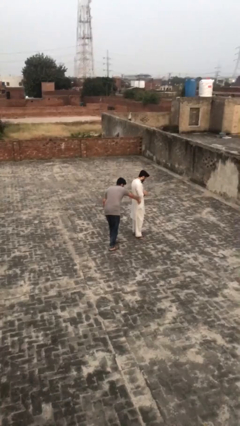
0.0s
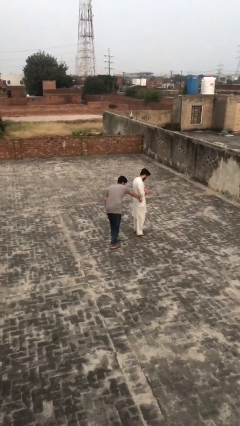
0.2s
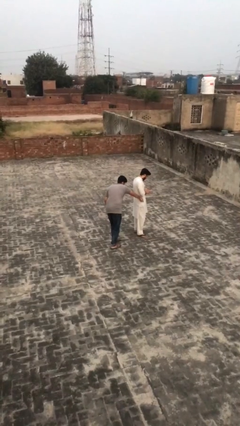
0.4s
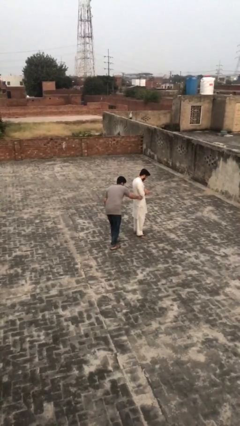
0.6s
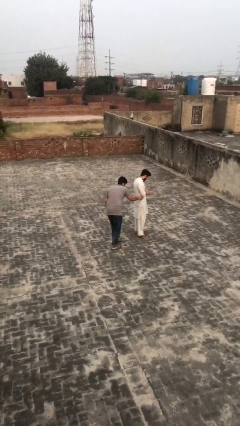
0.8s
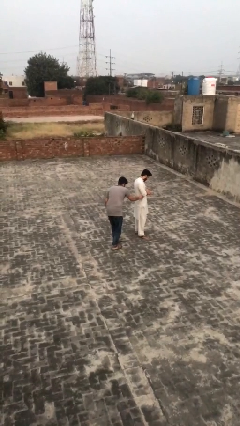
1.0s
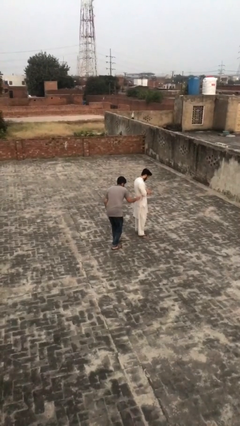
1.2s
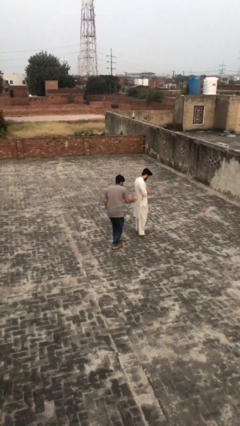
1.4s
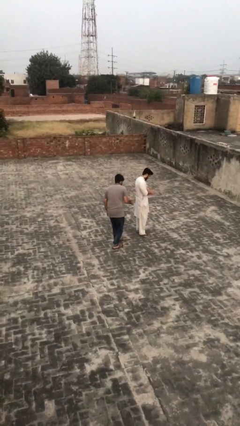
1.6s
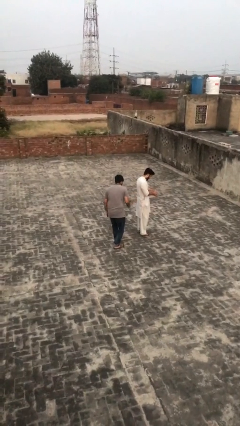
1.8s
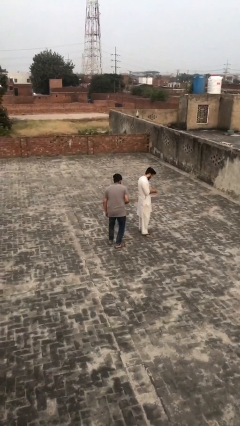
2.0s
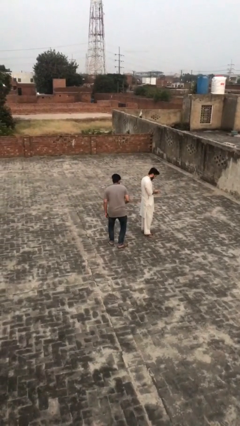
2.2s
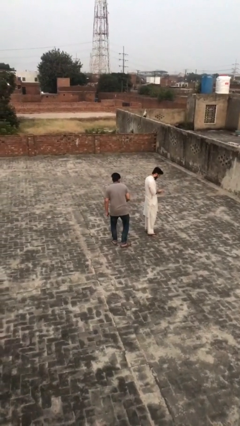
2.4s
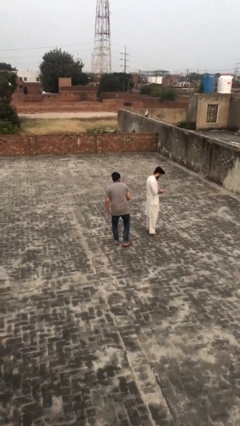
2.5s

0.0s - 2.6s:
person steals object from person

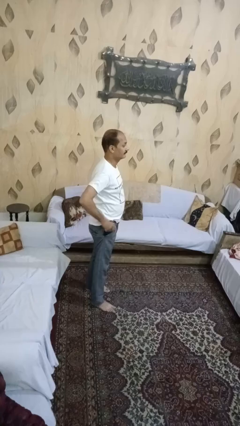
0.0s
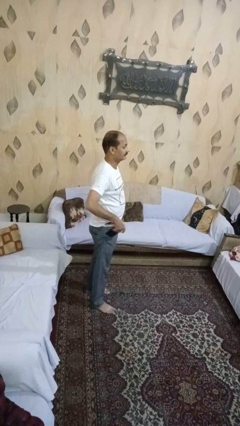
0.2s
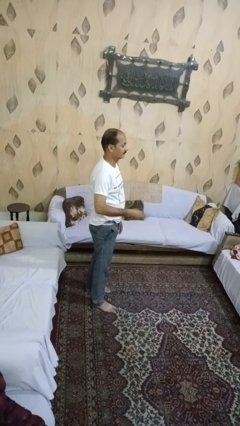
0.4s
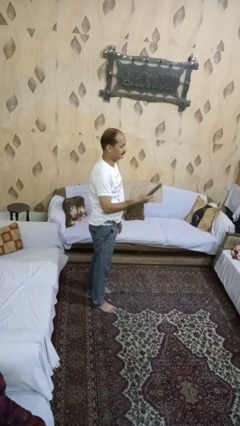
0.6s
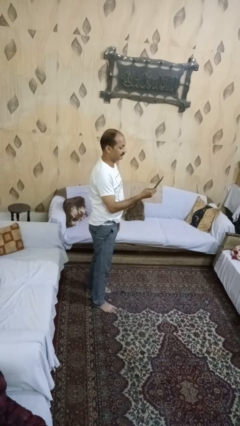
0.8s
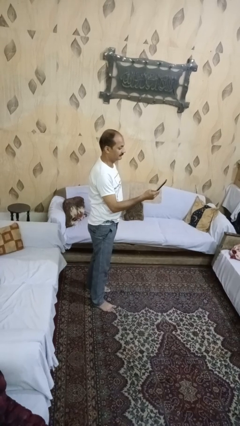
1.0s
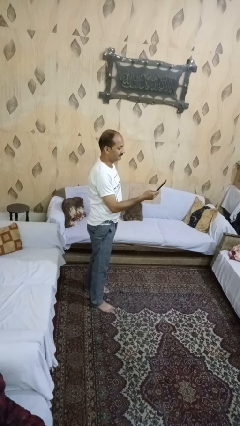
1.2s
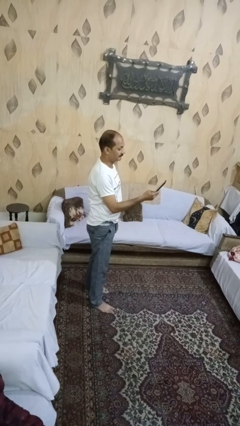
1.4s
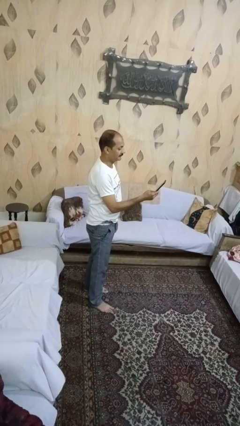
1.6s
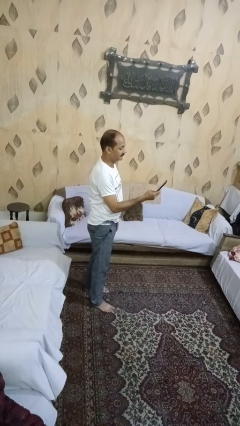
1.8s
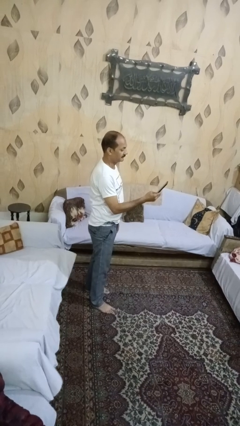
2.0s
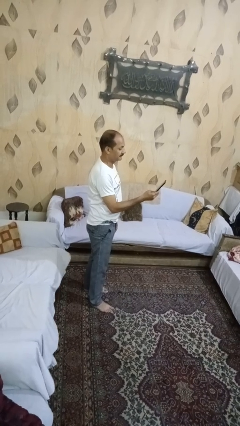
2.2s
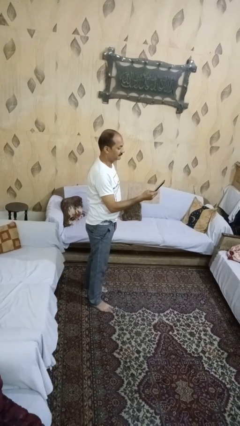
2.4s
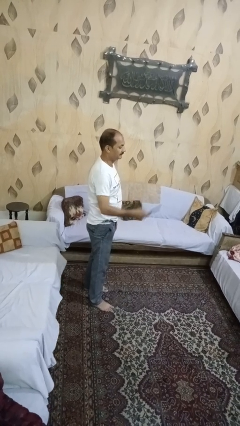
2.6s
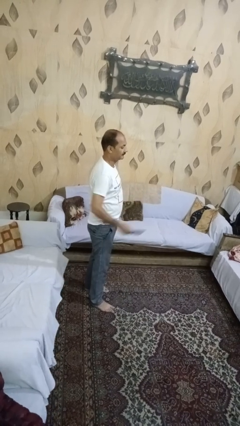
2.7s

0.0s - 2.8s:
person takes phone from pocket

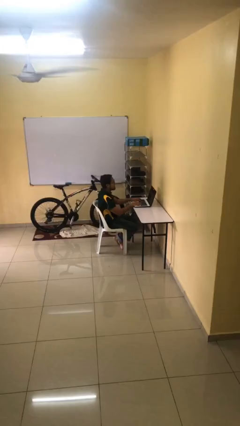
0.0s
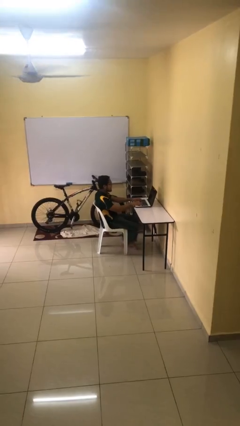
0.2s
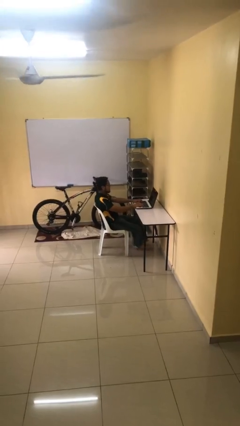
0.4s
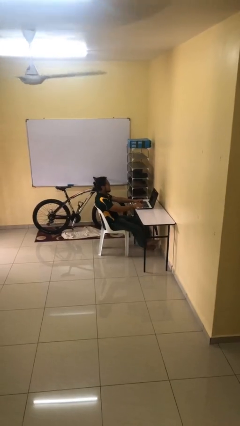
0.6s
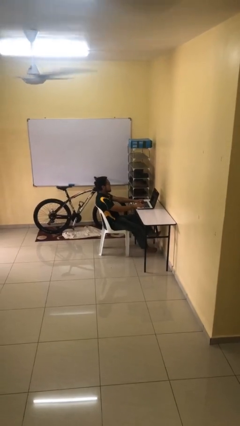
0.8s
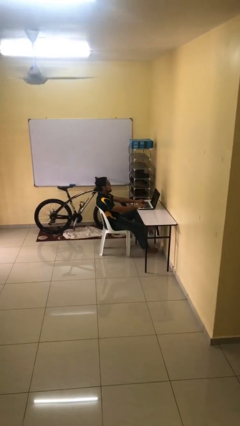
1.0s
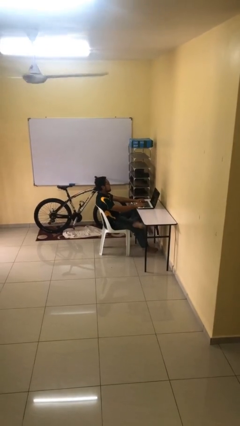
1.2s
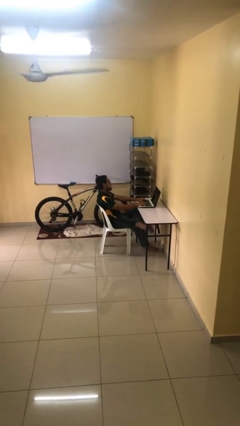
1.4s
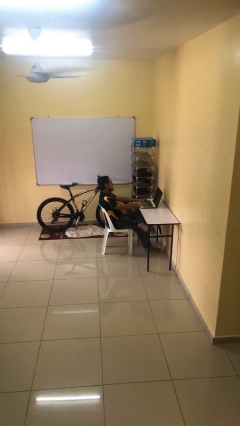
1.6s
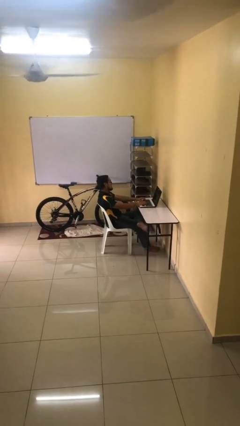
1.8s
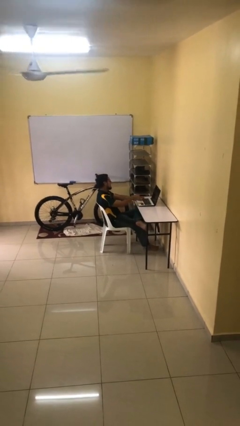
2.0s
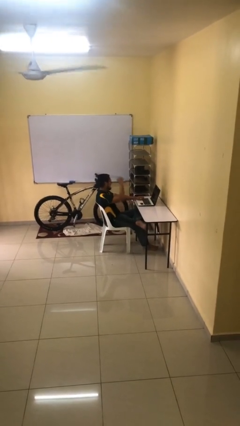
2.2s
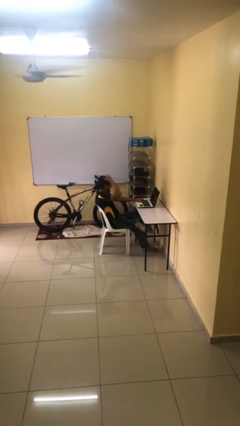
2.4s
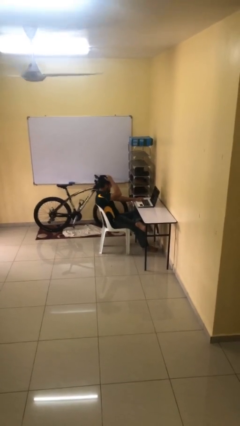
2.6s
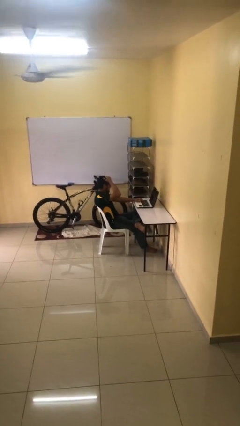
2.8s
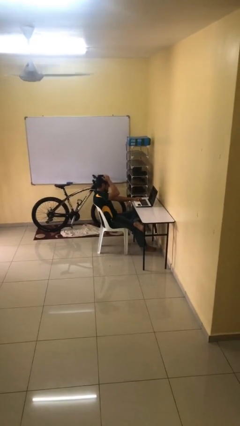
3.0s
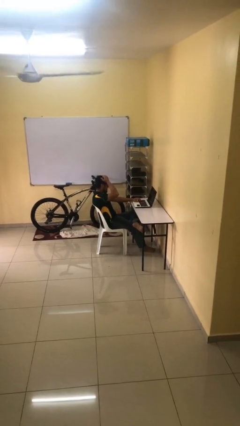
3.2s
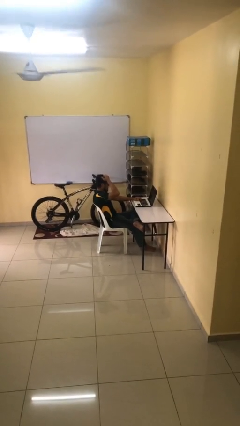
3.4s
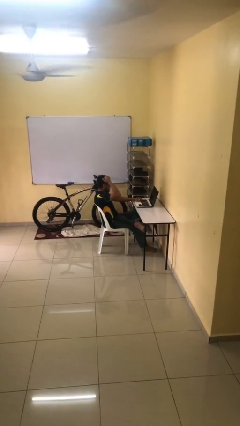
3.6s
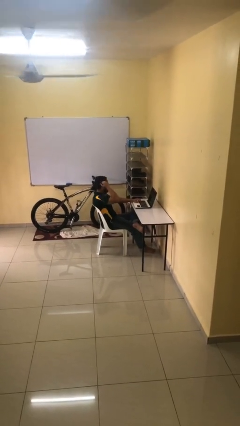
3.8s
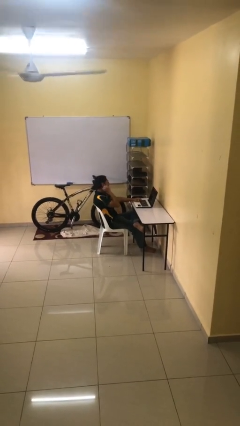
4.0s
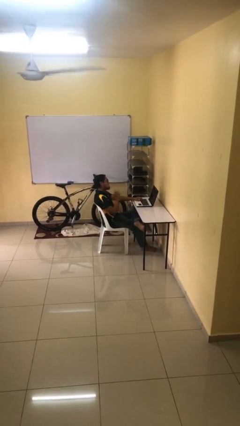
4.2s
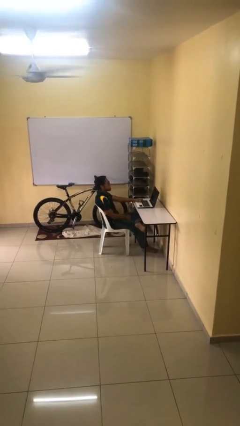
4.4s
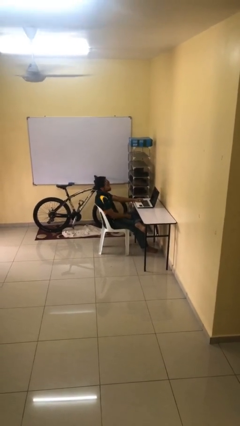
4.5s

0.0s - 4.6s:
person interacts with laptop

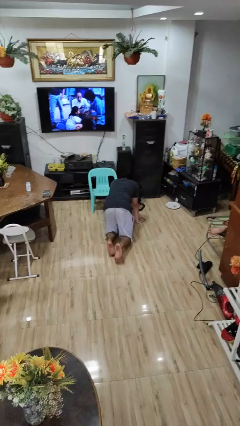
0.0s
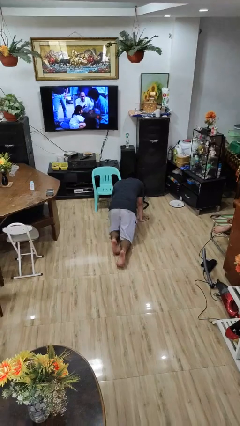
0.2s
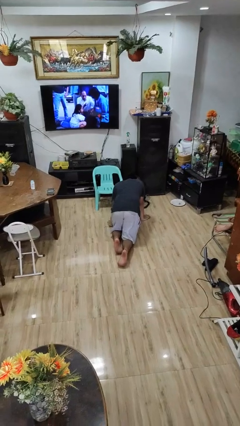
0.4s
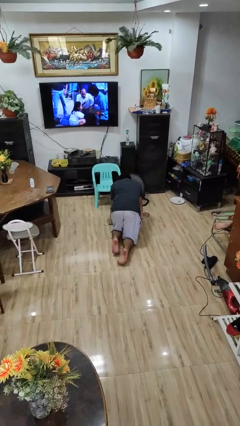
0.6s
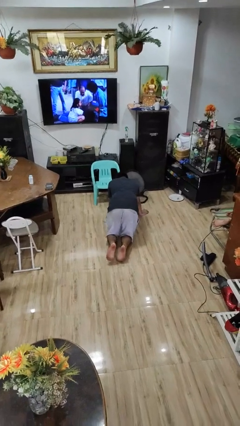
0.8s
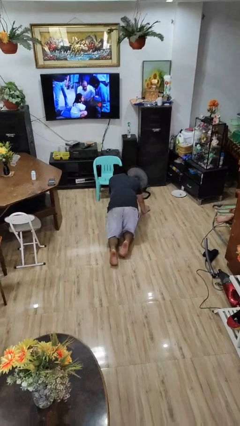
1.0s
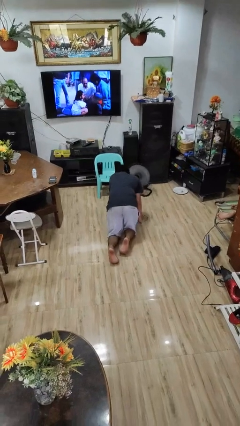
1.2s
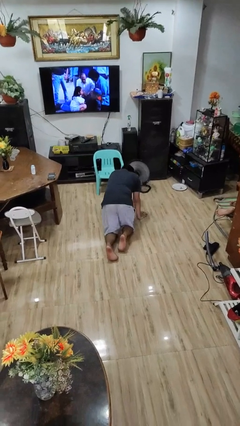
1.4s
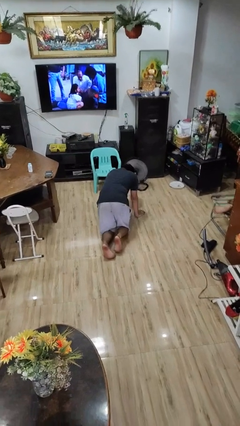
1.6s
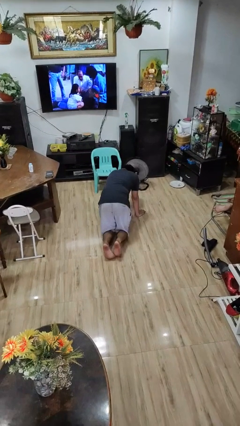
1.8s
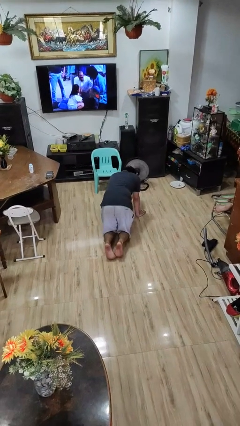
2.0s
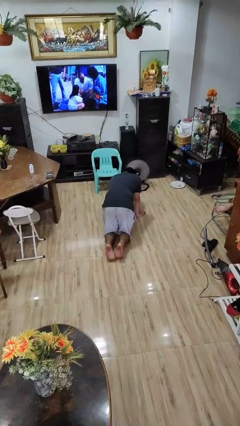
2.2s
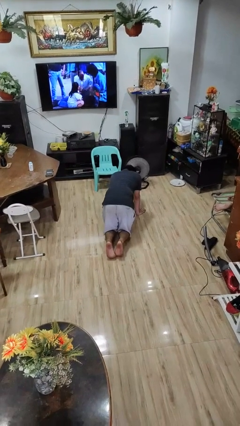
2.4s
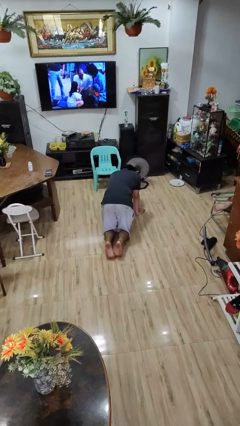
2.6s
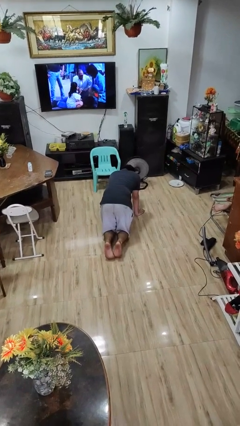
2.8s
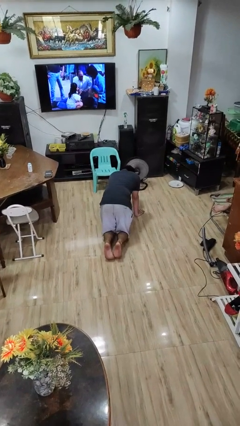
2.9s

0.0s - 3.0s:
person crawls

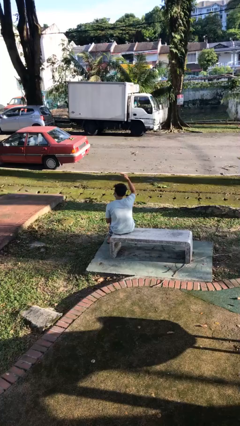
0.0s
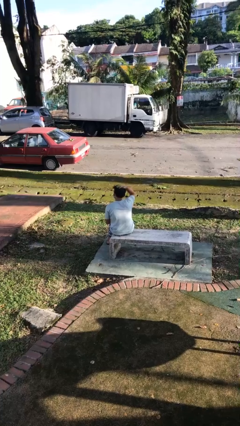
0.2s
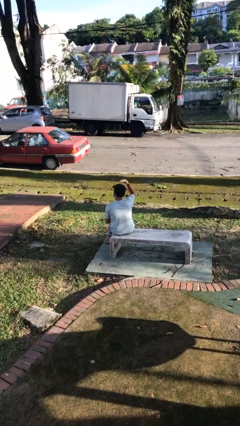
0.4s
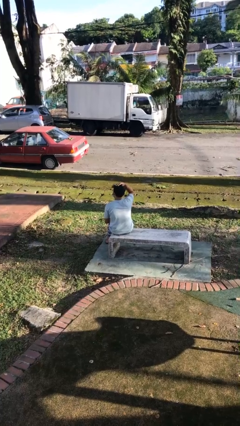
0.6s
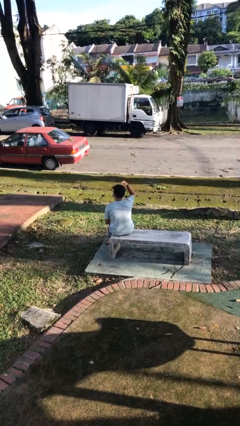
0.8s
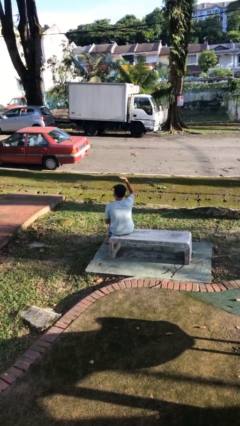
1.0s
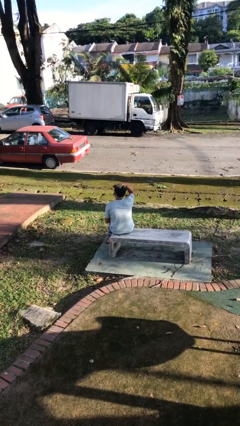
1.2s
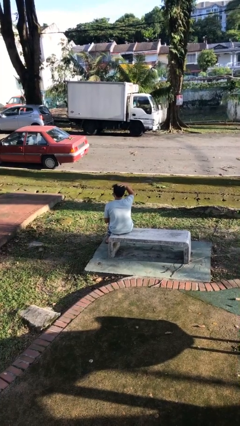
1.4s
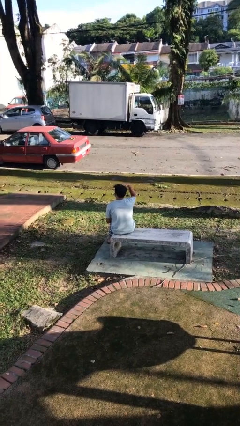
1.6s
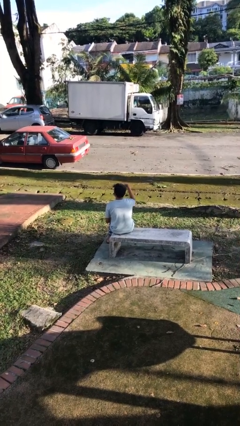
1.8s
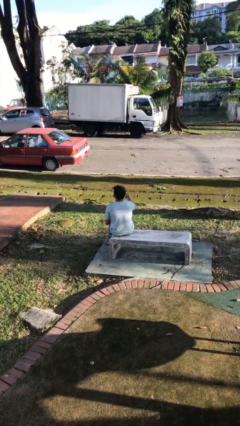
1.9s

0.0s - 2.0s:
person pats head

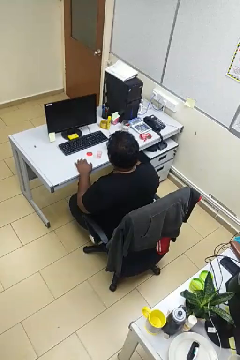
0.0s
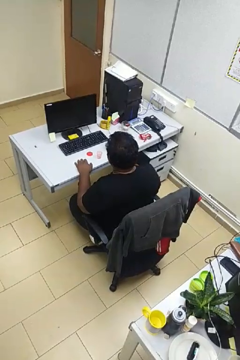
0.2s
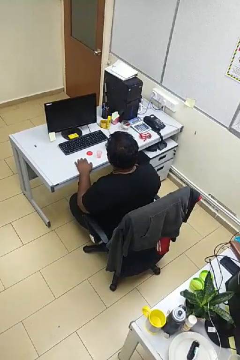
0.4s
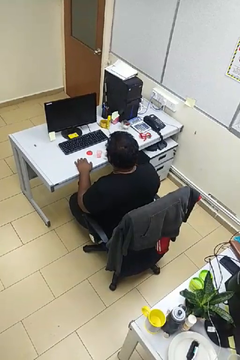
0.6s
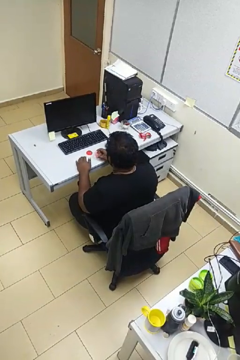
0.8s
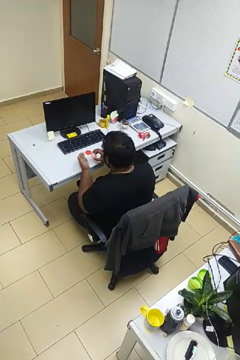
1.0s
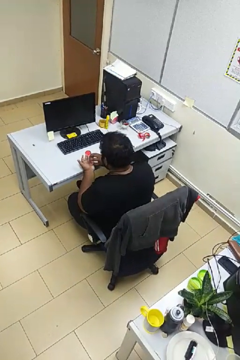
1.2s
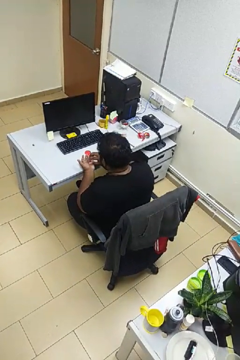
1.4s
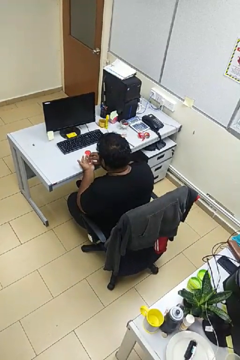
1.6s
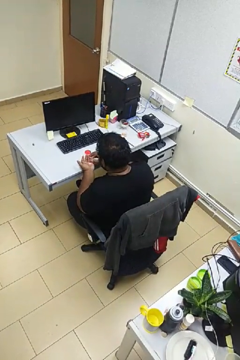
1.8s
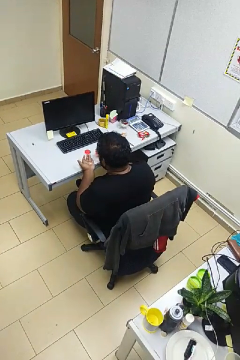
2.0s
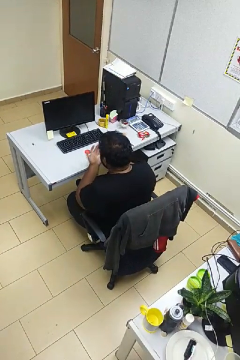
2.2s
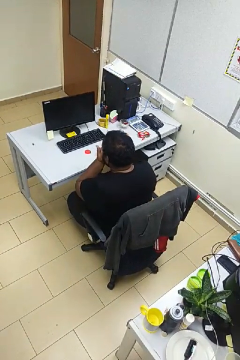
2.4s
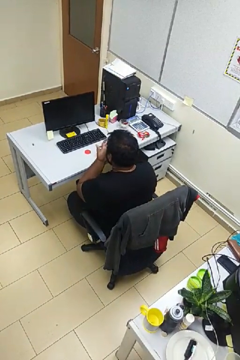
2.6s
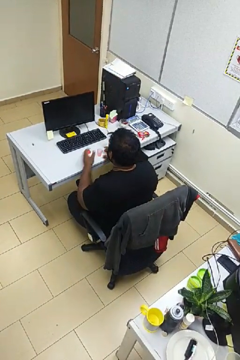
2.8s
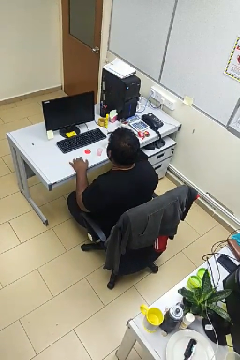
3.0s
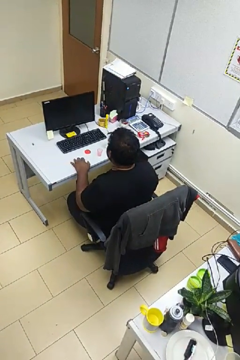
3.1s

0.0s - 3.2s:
person takes medicine pills
